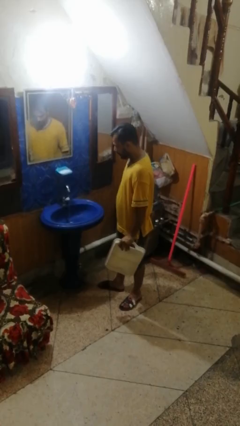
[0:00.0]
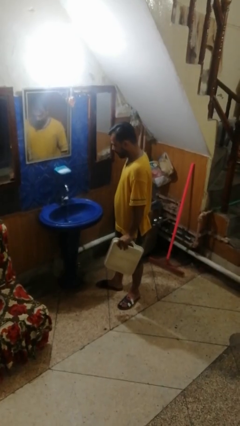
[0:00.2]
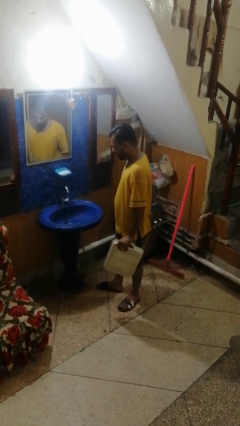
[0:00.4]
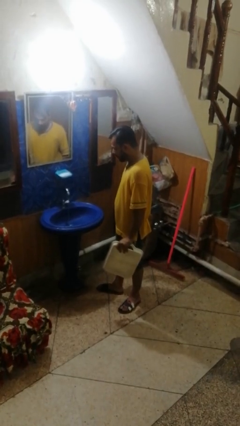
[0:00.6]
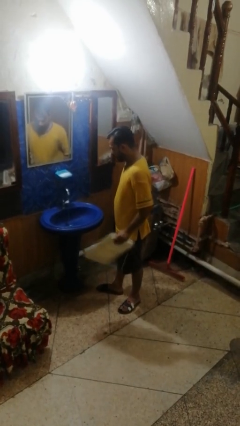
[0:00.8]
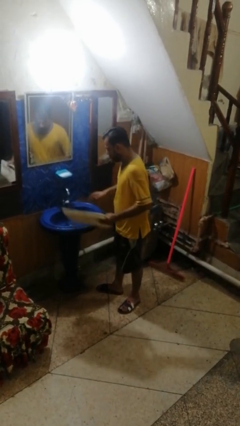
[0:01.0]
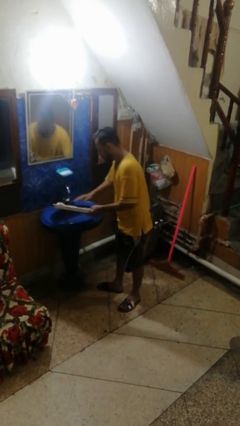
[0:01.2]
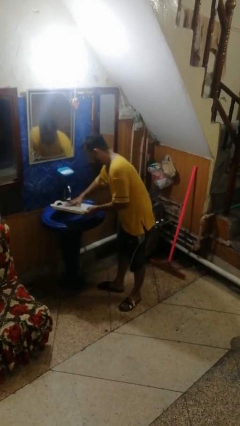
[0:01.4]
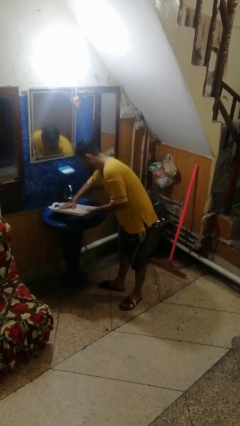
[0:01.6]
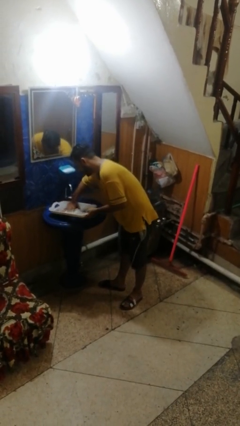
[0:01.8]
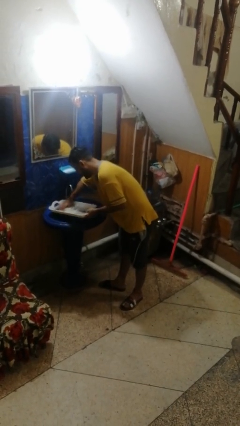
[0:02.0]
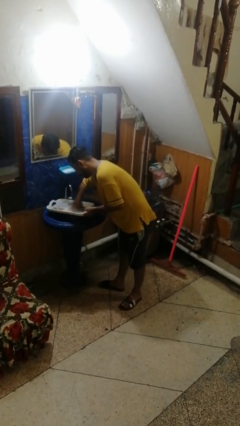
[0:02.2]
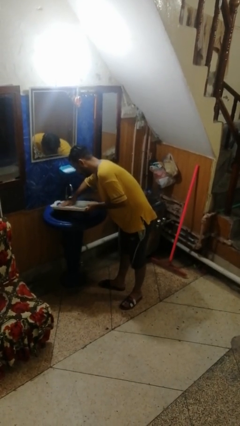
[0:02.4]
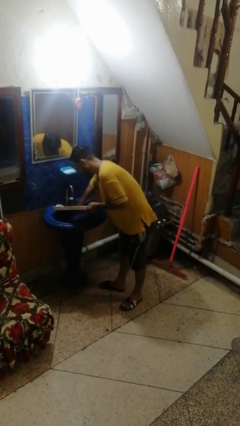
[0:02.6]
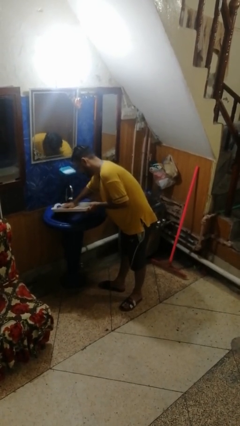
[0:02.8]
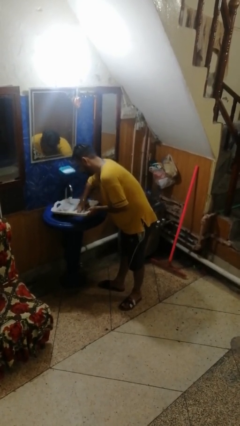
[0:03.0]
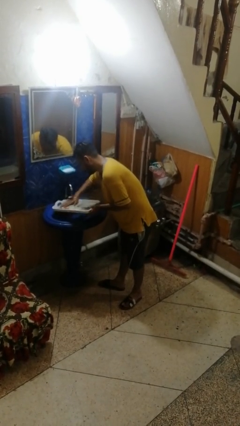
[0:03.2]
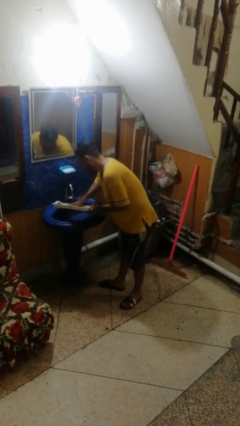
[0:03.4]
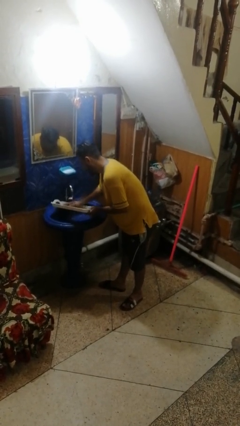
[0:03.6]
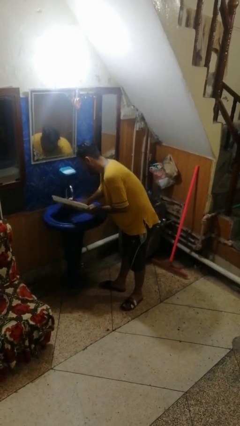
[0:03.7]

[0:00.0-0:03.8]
person washes dish

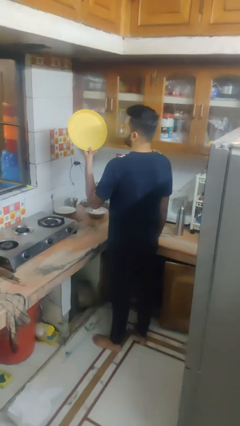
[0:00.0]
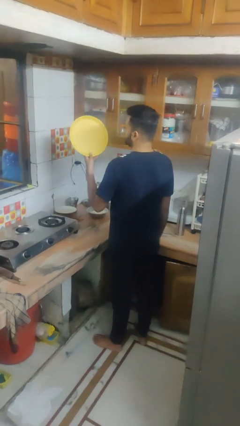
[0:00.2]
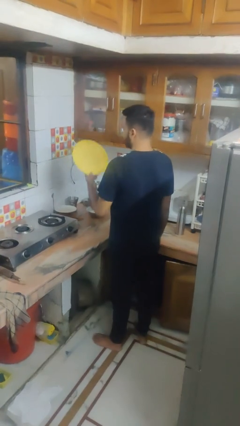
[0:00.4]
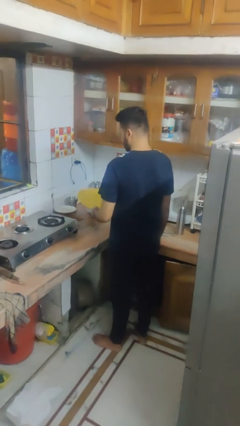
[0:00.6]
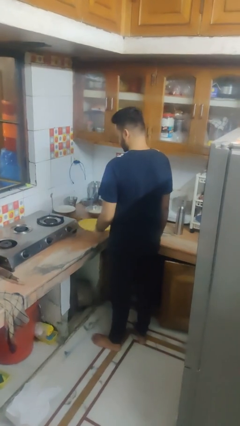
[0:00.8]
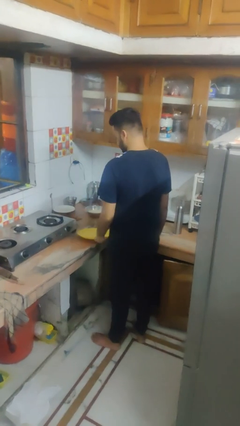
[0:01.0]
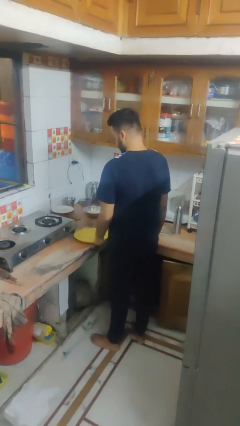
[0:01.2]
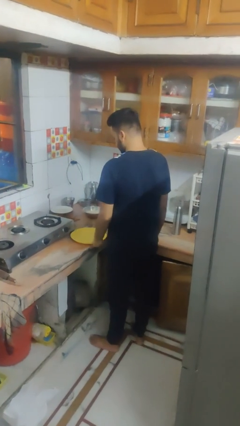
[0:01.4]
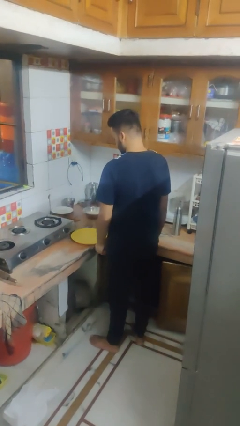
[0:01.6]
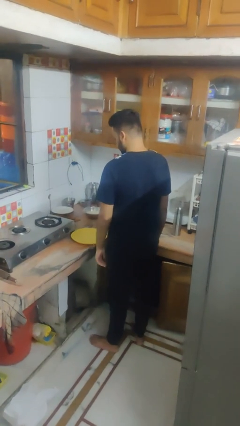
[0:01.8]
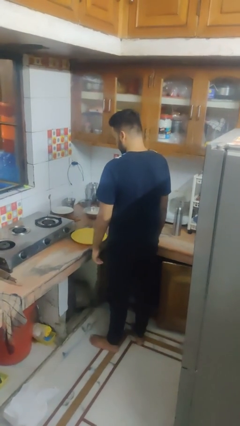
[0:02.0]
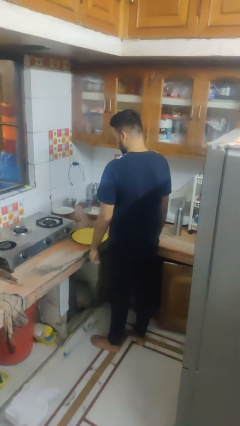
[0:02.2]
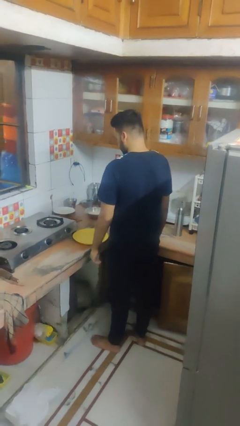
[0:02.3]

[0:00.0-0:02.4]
person puts down object on countertop

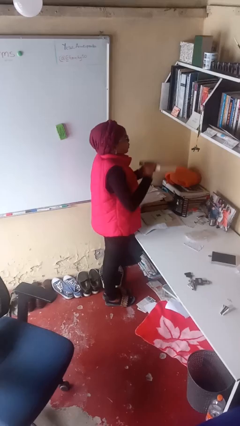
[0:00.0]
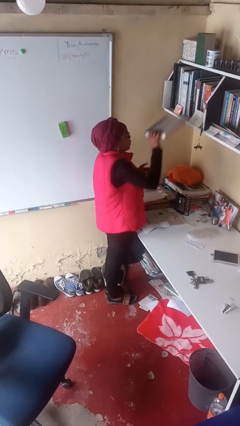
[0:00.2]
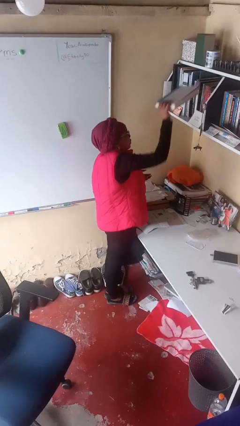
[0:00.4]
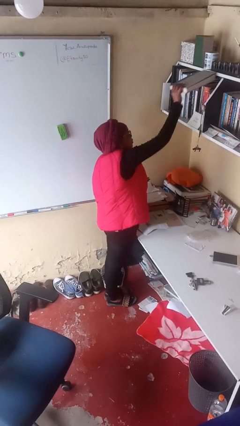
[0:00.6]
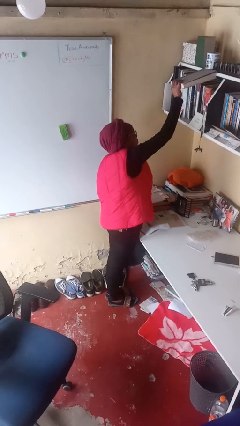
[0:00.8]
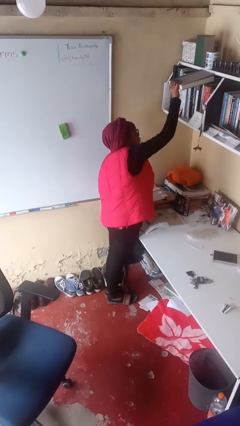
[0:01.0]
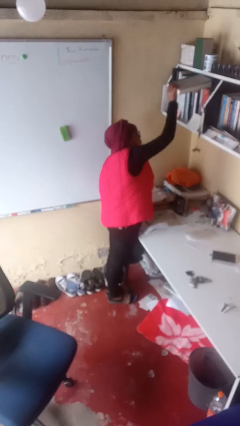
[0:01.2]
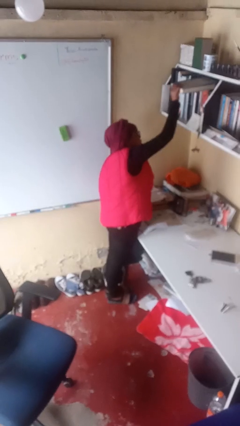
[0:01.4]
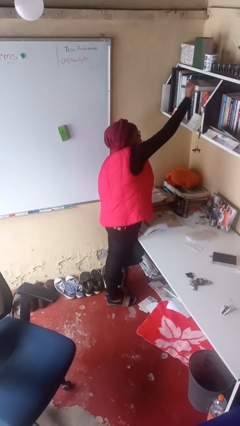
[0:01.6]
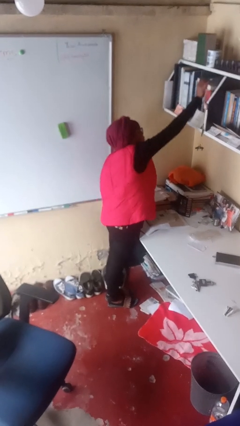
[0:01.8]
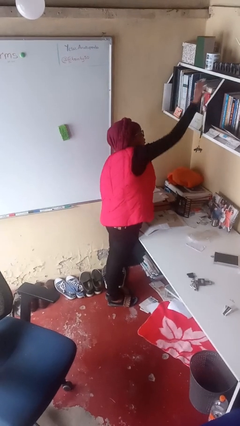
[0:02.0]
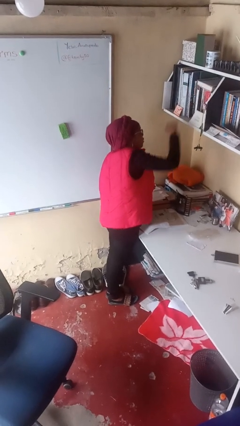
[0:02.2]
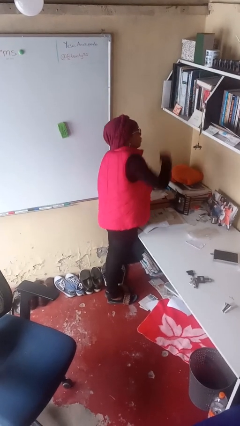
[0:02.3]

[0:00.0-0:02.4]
person puts down object on shelf

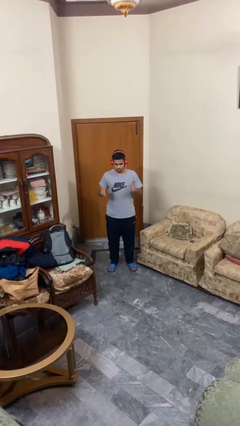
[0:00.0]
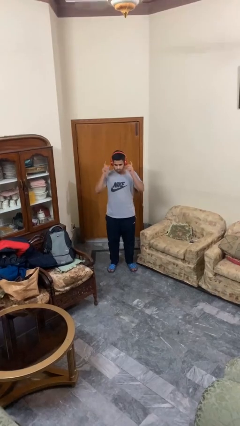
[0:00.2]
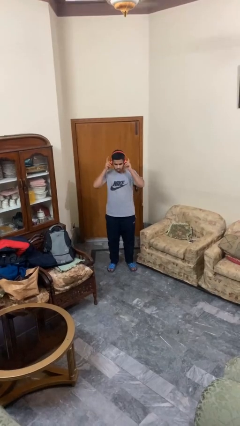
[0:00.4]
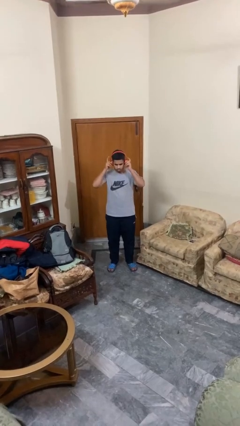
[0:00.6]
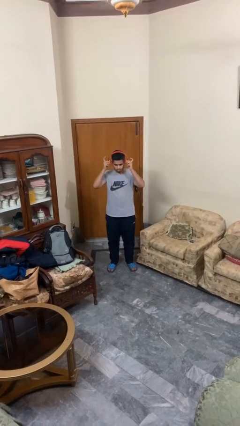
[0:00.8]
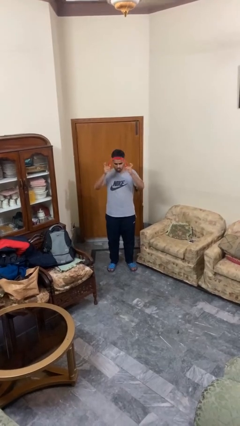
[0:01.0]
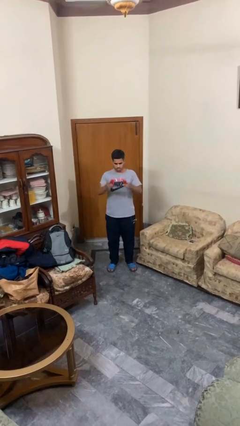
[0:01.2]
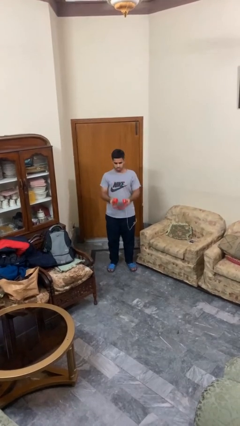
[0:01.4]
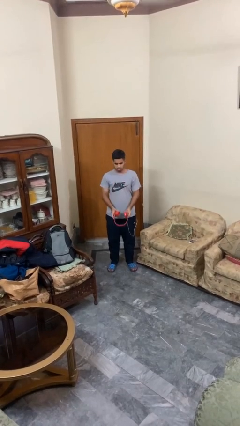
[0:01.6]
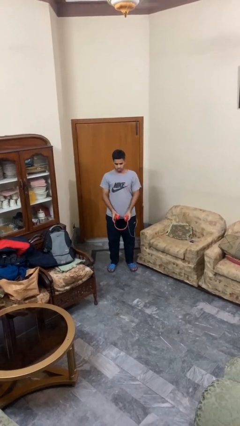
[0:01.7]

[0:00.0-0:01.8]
person takes off headphones

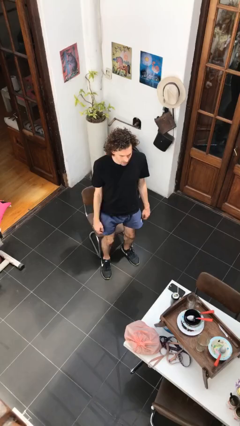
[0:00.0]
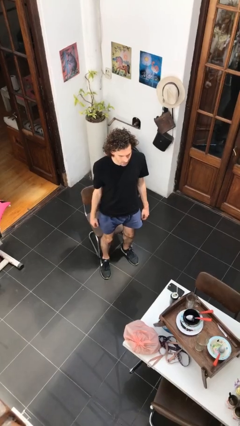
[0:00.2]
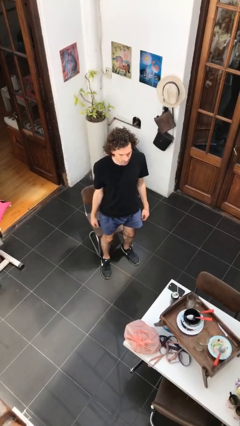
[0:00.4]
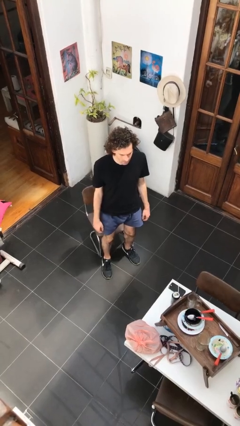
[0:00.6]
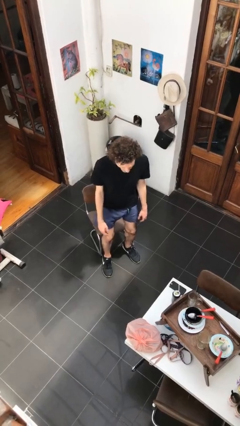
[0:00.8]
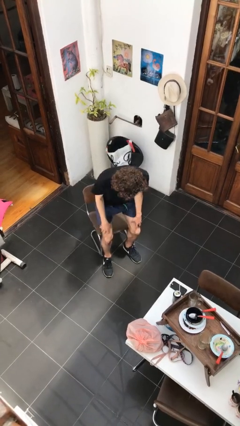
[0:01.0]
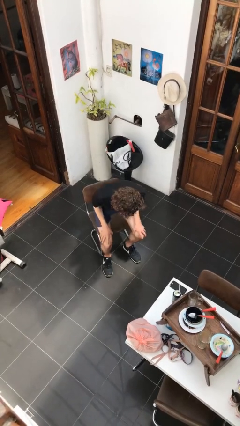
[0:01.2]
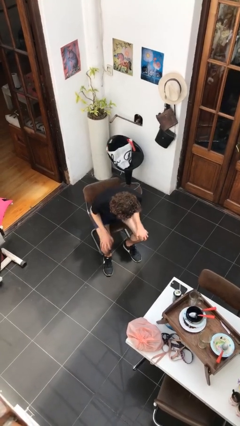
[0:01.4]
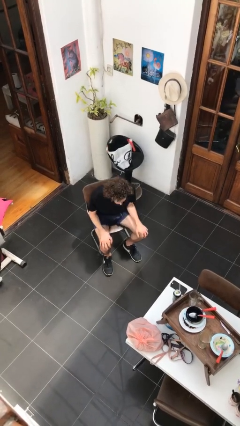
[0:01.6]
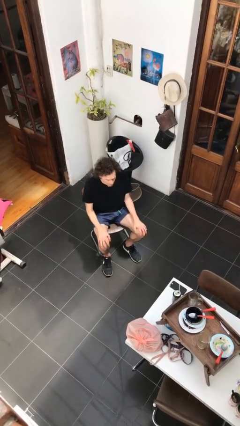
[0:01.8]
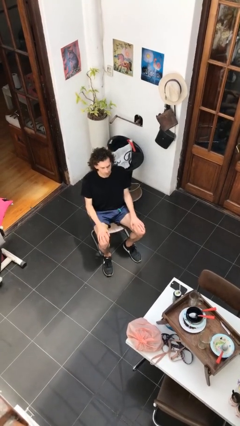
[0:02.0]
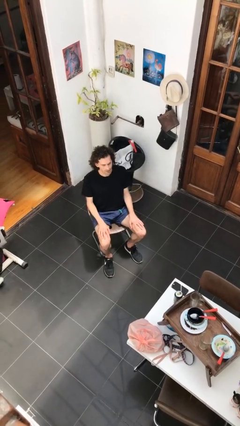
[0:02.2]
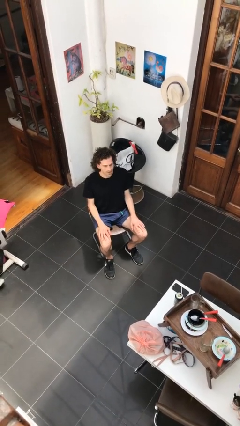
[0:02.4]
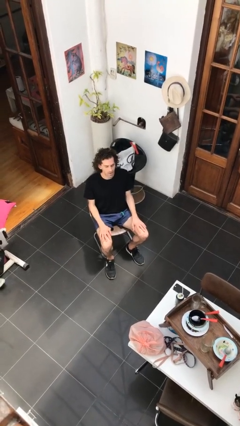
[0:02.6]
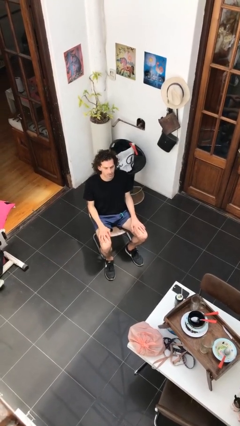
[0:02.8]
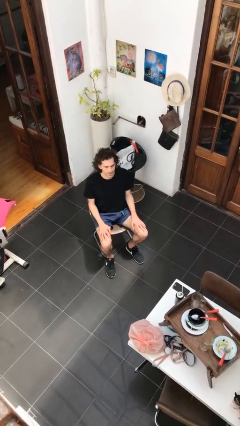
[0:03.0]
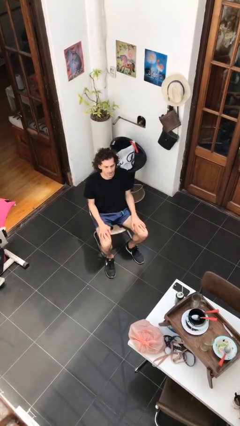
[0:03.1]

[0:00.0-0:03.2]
person sits down

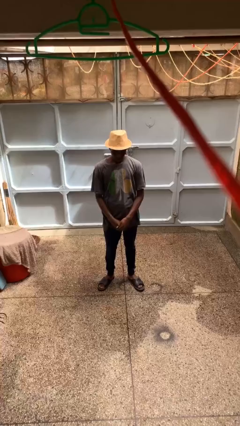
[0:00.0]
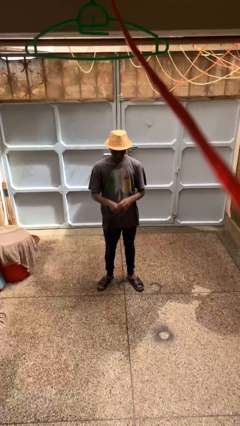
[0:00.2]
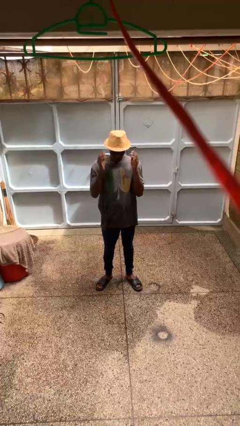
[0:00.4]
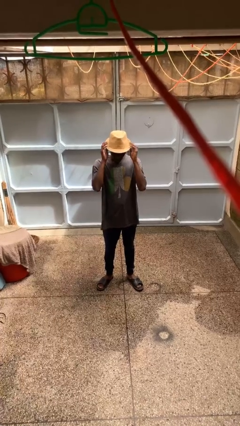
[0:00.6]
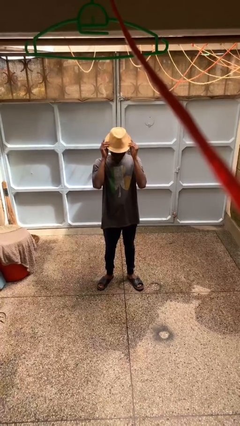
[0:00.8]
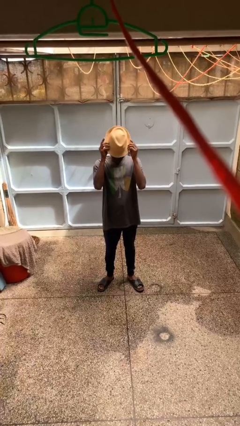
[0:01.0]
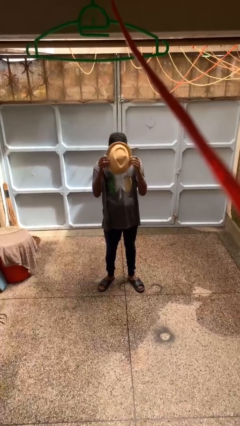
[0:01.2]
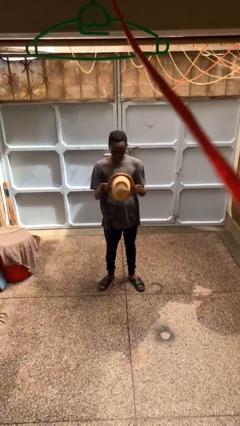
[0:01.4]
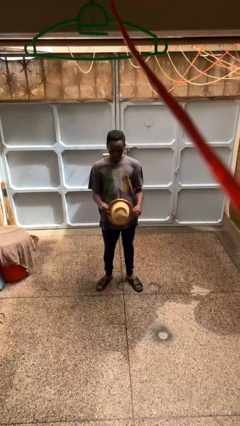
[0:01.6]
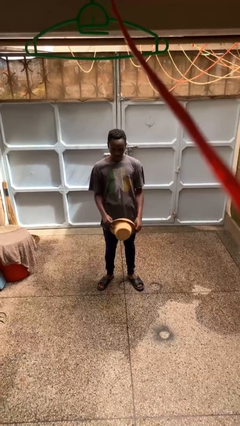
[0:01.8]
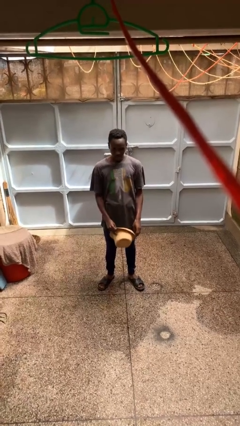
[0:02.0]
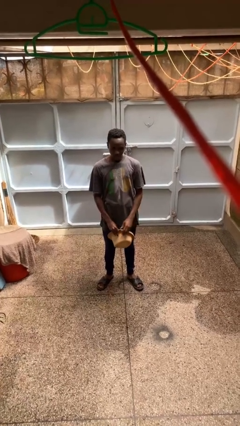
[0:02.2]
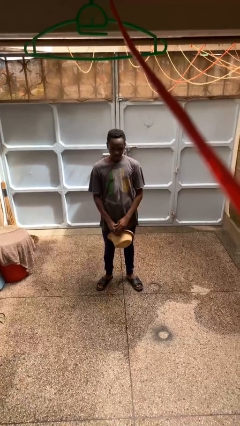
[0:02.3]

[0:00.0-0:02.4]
person takes off hat

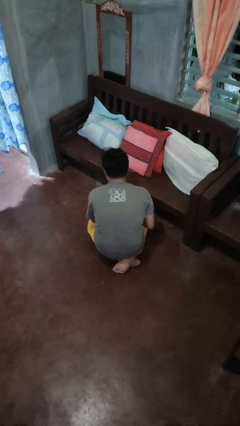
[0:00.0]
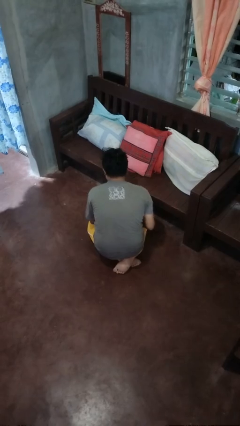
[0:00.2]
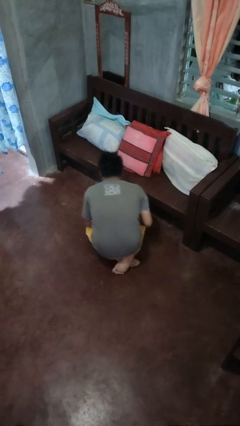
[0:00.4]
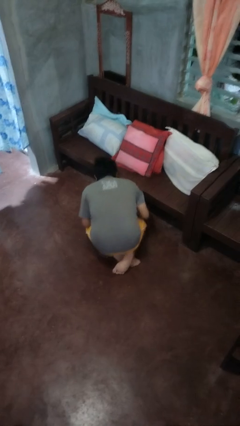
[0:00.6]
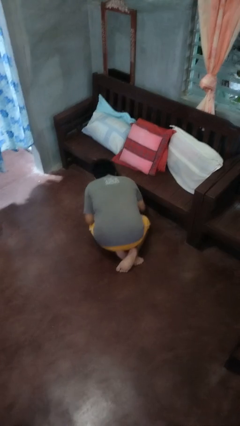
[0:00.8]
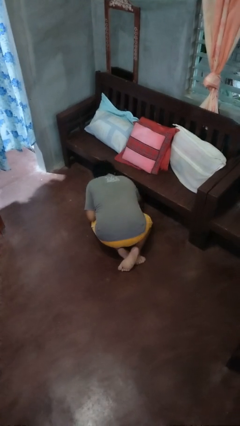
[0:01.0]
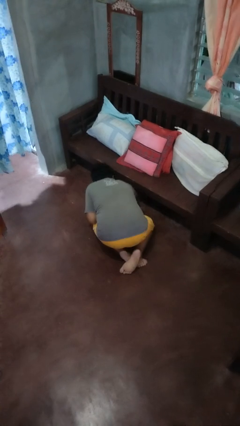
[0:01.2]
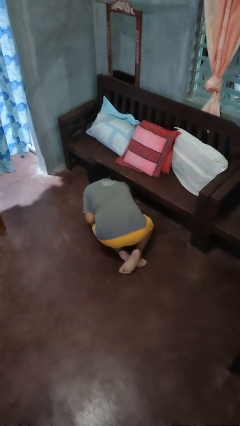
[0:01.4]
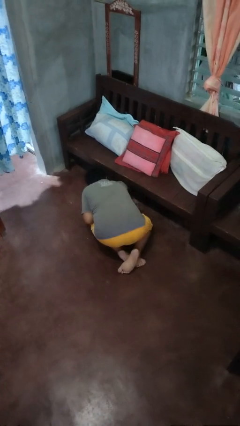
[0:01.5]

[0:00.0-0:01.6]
person searches under couch
